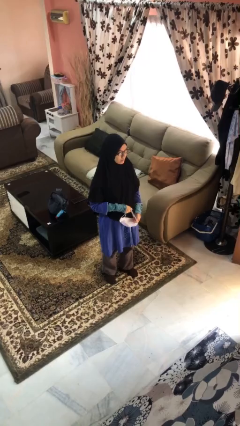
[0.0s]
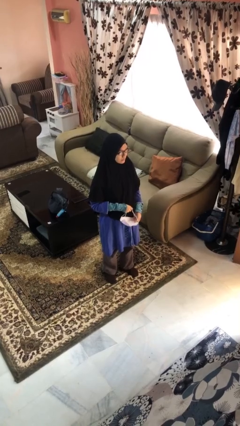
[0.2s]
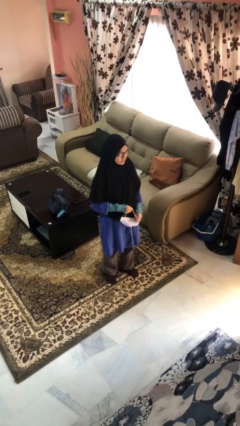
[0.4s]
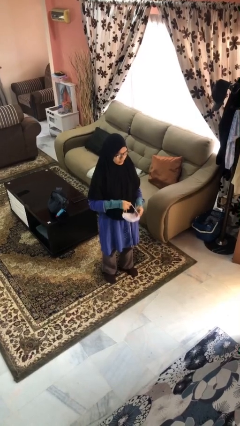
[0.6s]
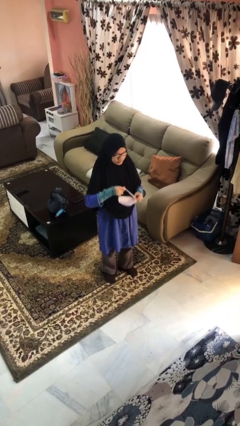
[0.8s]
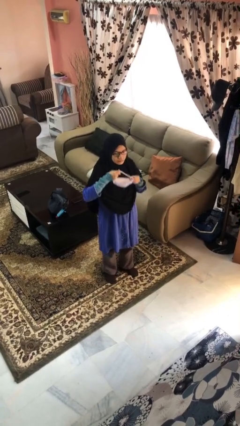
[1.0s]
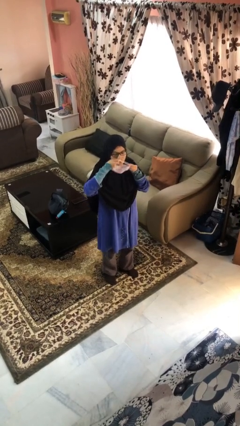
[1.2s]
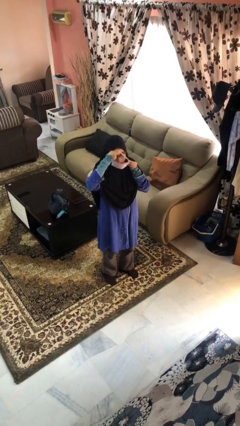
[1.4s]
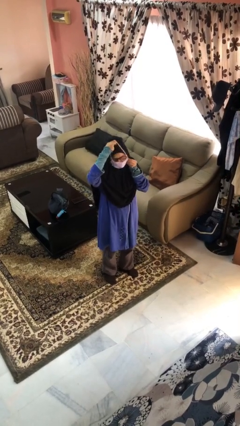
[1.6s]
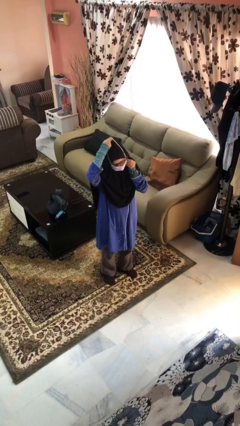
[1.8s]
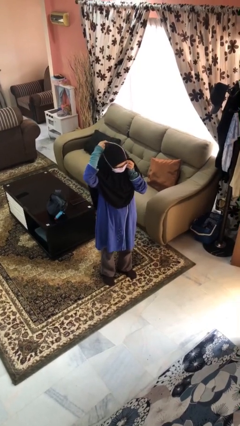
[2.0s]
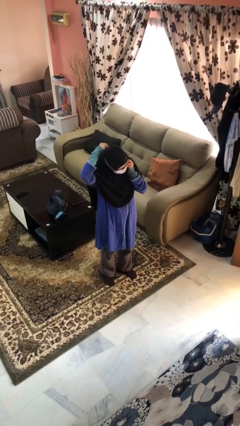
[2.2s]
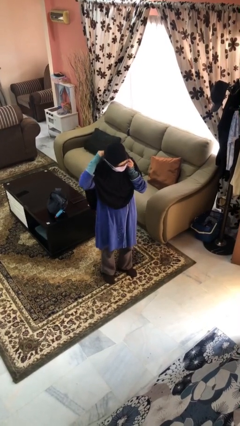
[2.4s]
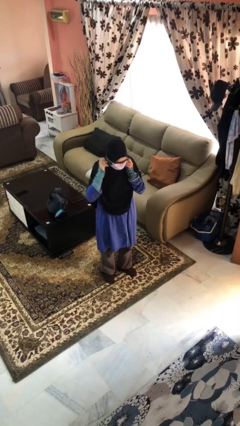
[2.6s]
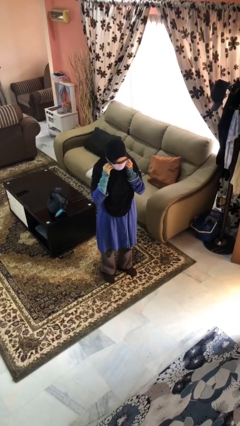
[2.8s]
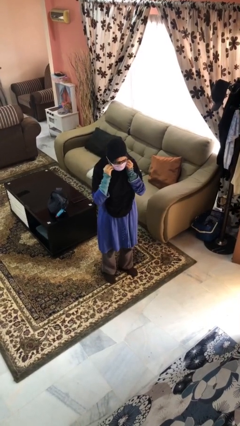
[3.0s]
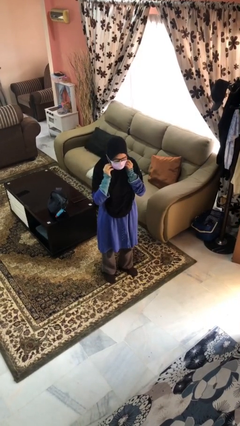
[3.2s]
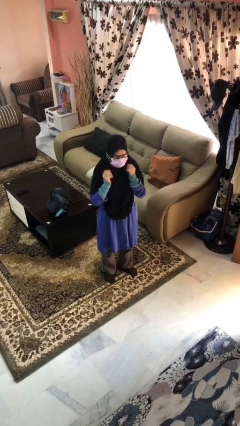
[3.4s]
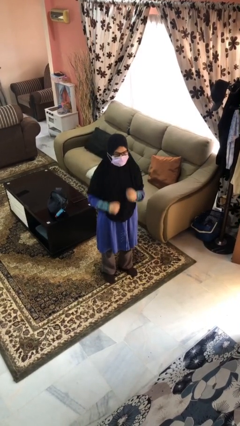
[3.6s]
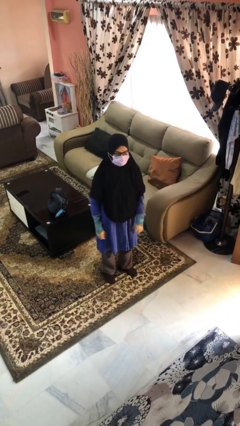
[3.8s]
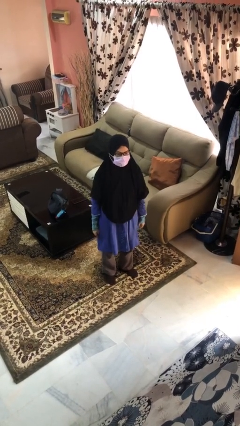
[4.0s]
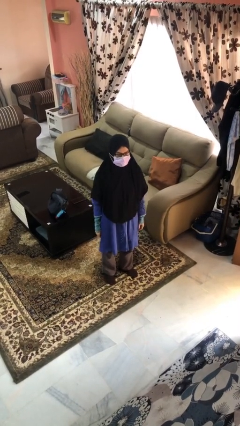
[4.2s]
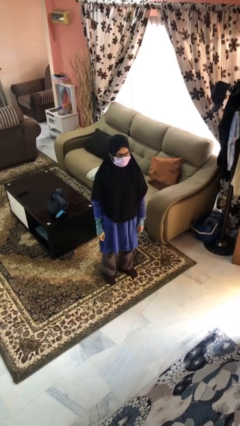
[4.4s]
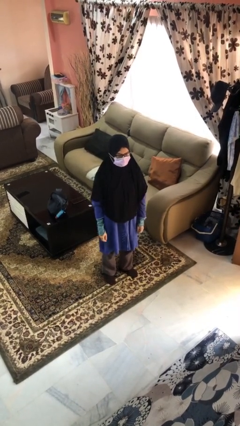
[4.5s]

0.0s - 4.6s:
person puts on facemask

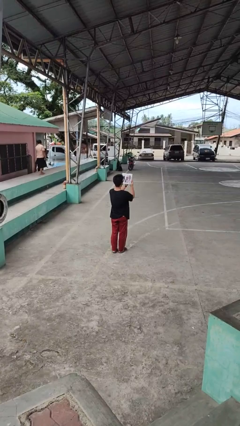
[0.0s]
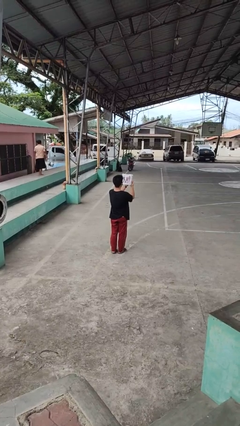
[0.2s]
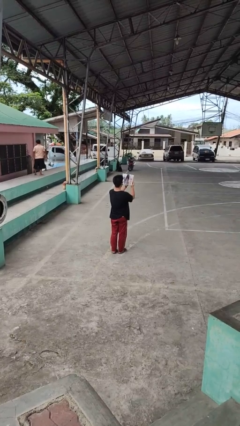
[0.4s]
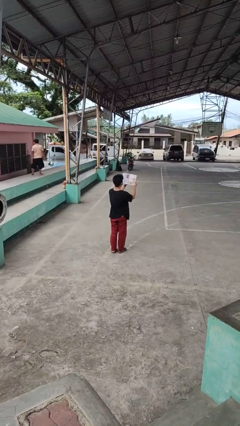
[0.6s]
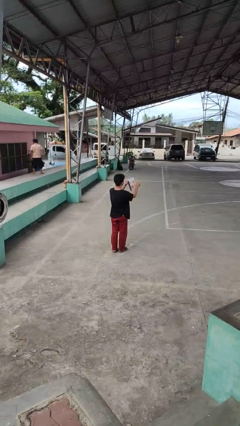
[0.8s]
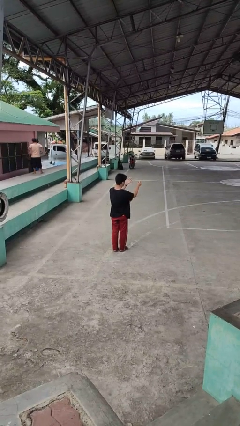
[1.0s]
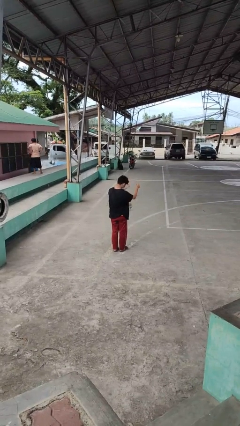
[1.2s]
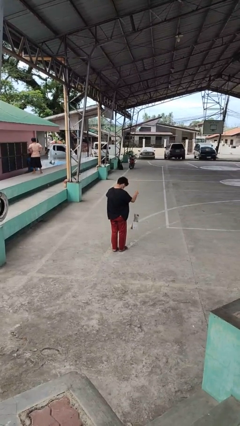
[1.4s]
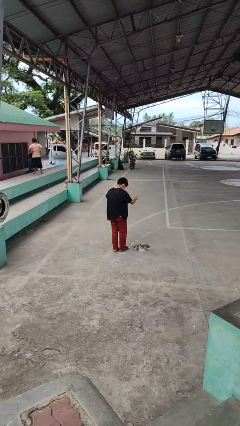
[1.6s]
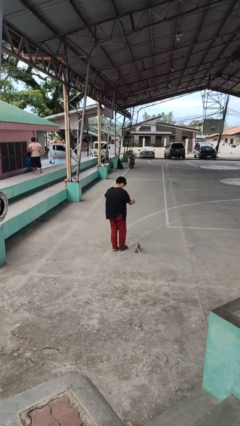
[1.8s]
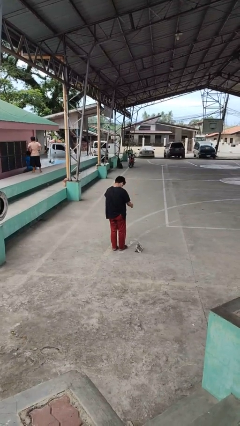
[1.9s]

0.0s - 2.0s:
person drops object

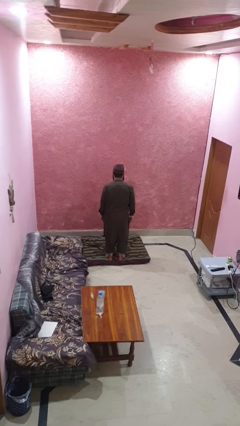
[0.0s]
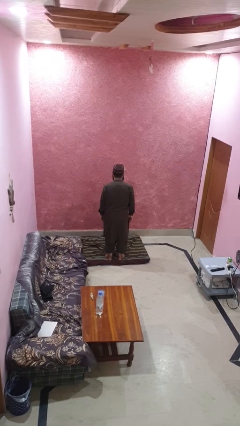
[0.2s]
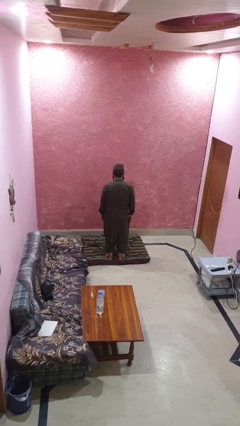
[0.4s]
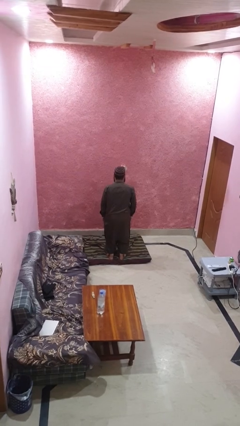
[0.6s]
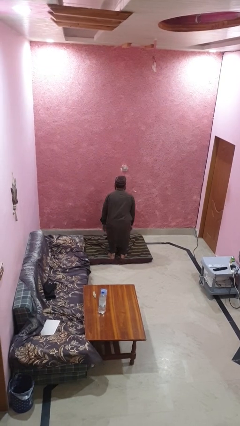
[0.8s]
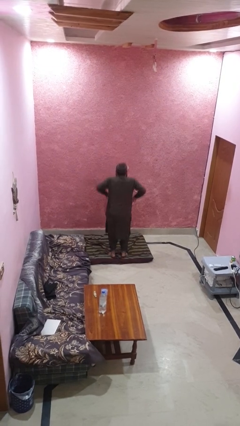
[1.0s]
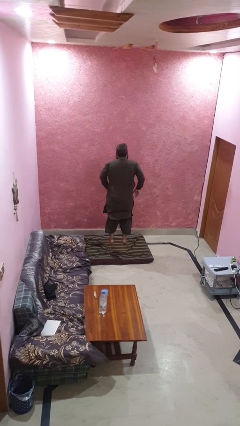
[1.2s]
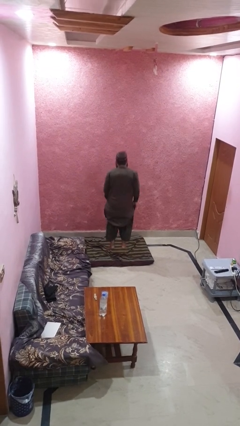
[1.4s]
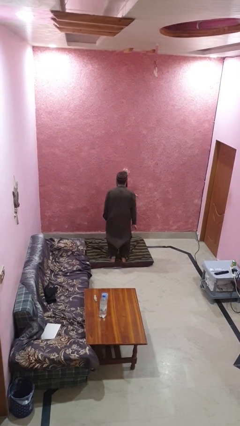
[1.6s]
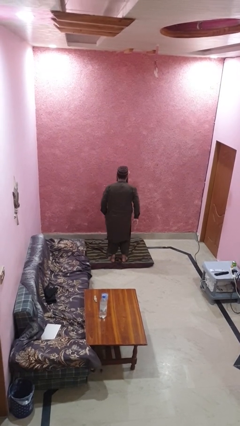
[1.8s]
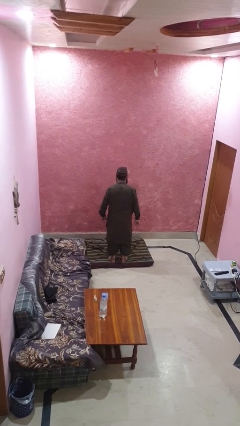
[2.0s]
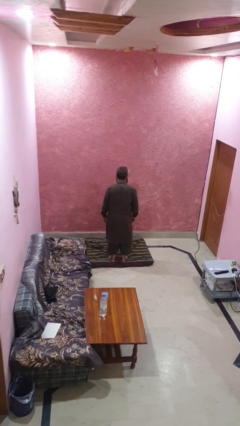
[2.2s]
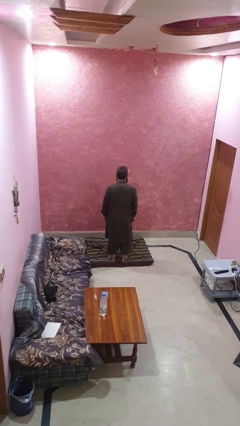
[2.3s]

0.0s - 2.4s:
person jumps

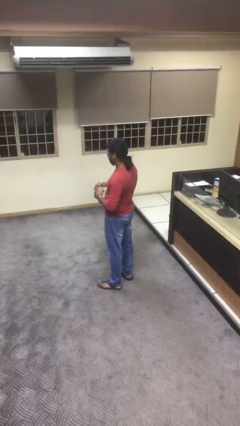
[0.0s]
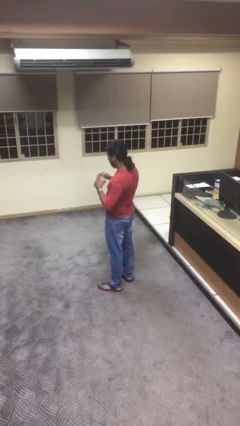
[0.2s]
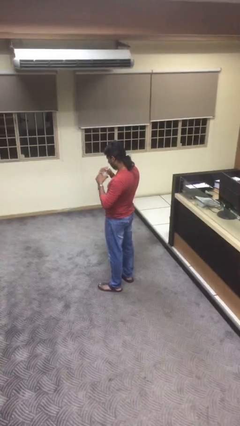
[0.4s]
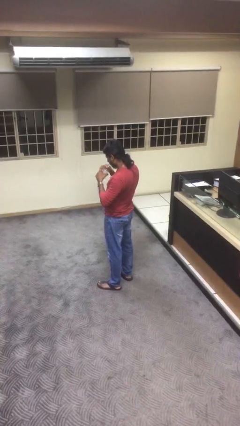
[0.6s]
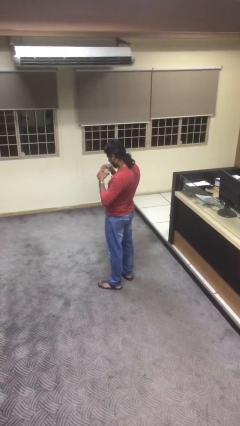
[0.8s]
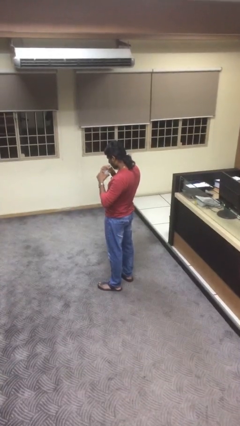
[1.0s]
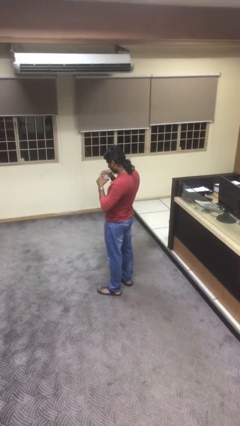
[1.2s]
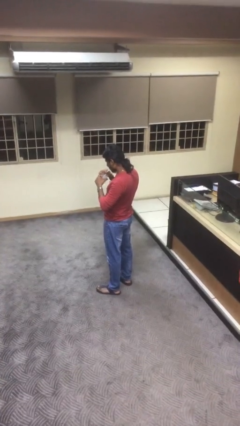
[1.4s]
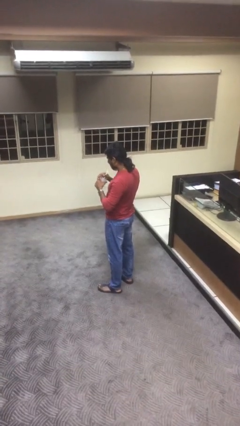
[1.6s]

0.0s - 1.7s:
person drinks from straw

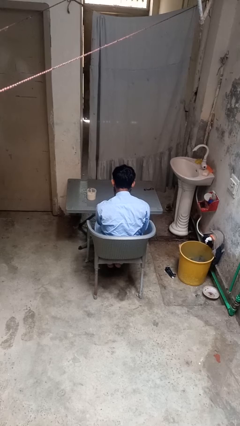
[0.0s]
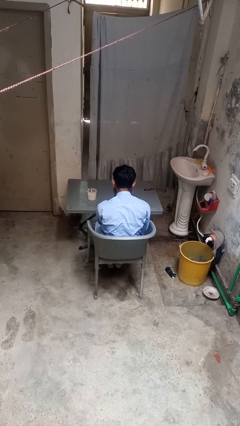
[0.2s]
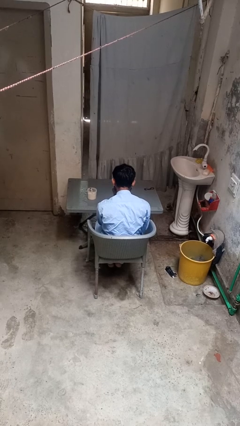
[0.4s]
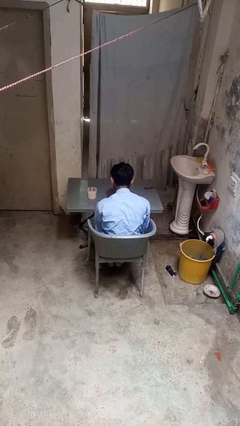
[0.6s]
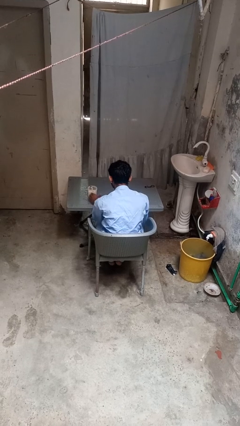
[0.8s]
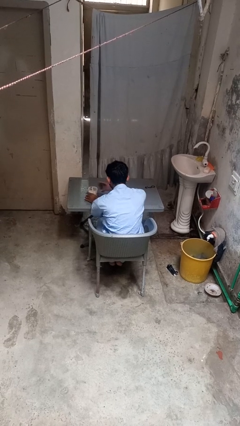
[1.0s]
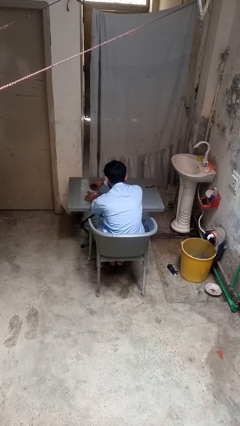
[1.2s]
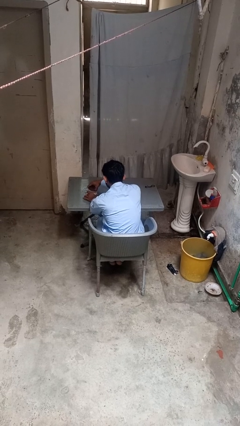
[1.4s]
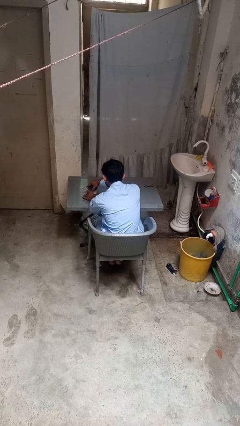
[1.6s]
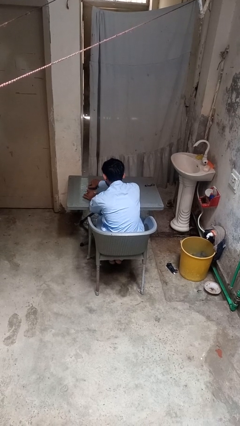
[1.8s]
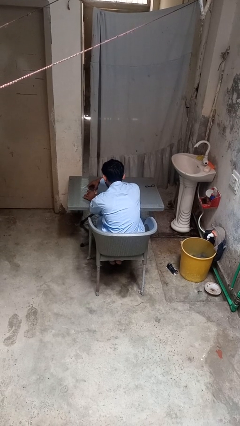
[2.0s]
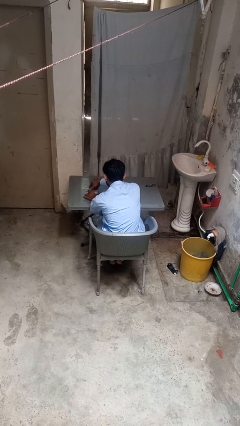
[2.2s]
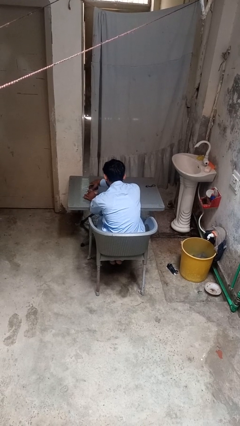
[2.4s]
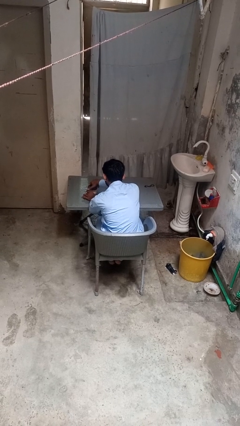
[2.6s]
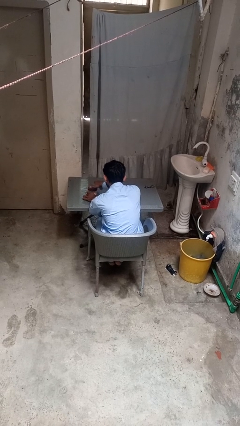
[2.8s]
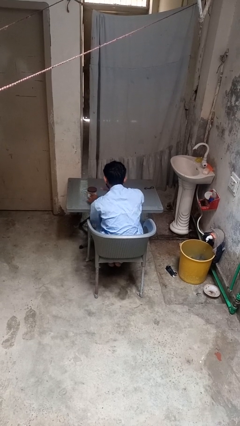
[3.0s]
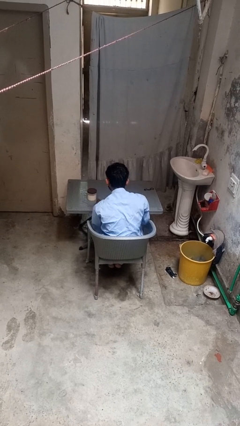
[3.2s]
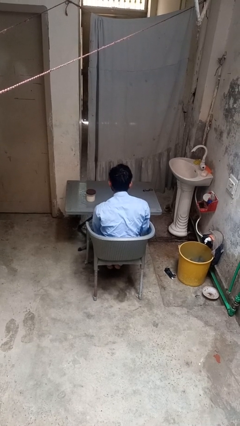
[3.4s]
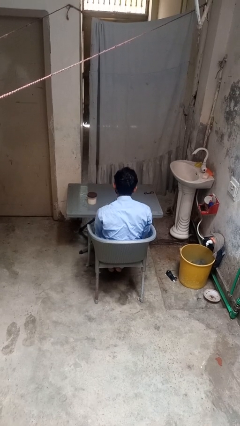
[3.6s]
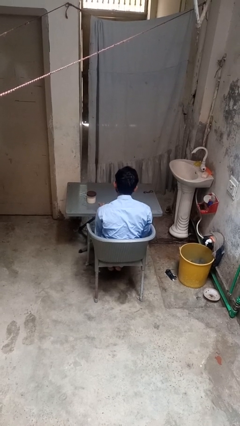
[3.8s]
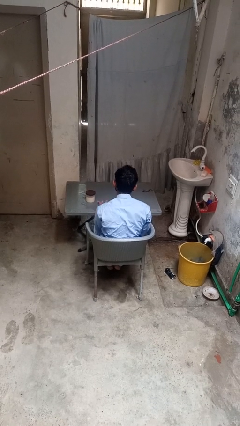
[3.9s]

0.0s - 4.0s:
person closes jar

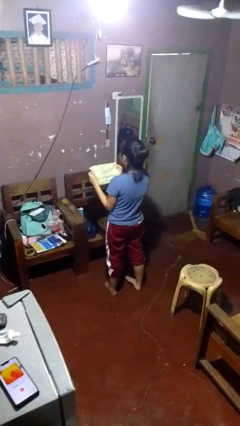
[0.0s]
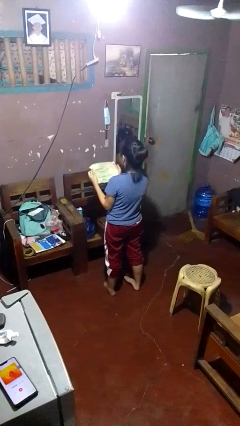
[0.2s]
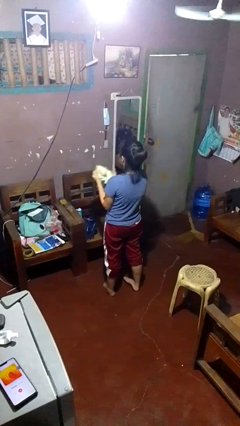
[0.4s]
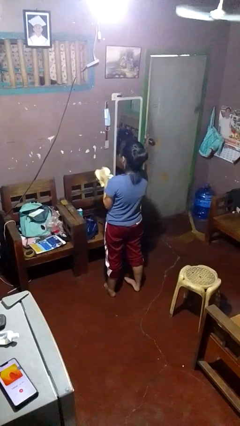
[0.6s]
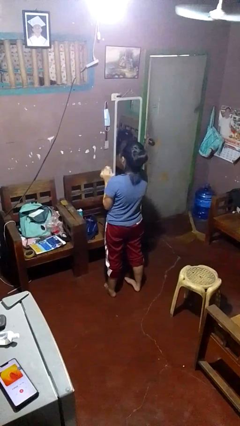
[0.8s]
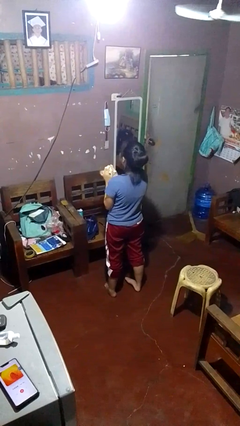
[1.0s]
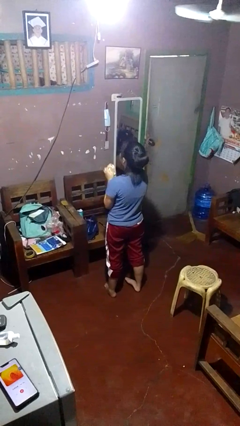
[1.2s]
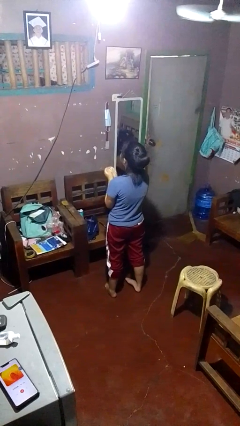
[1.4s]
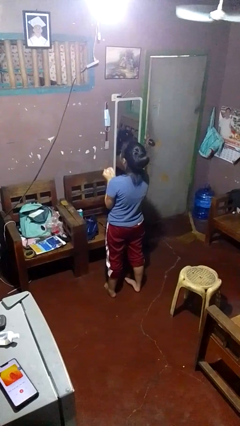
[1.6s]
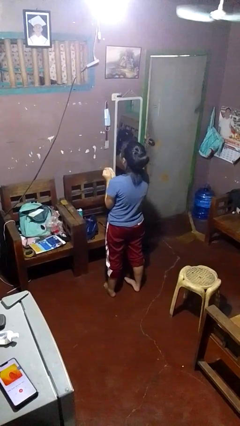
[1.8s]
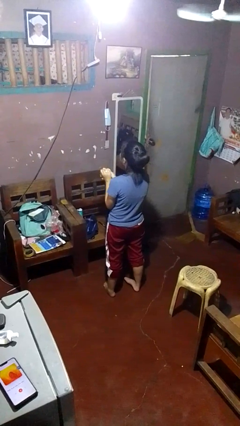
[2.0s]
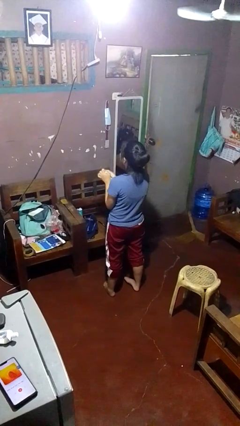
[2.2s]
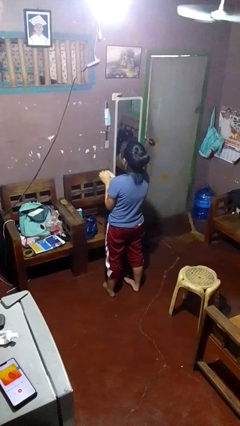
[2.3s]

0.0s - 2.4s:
person crumples paper

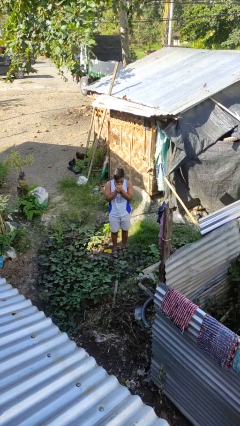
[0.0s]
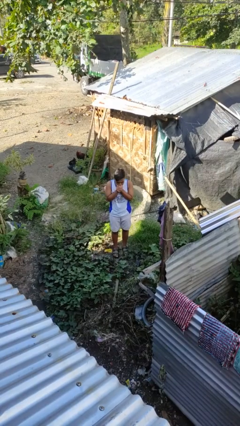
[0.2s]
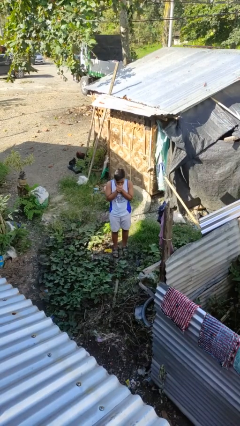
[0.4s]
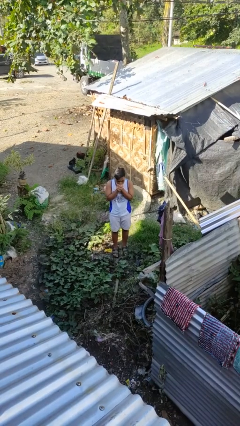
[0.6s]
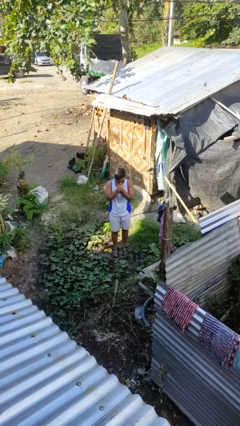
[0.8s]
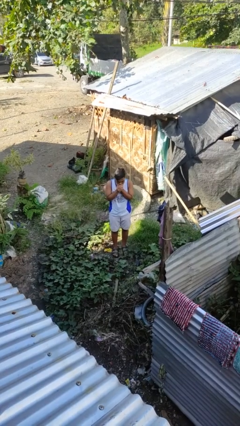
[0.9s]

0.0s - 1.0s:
person blows into hands
